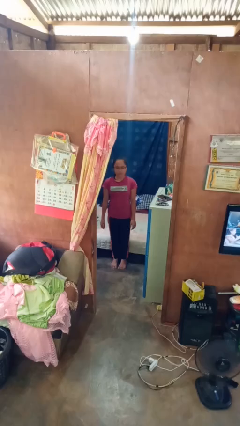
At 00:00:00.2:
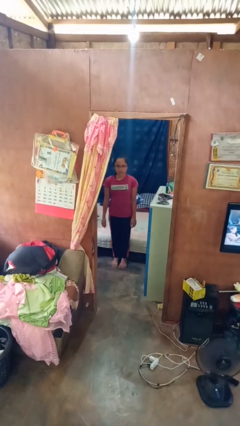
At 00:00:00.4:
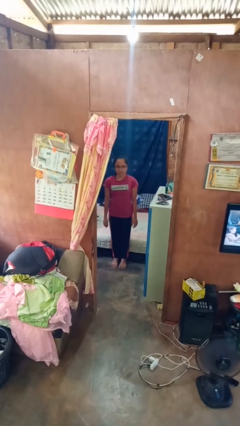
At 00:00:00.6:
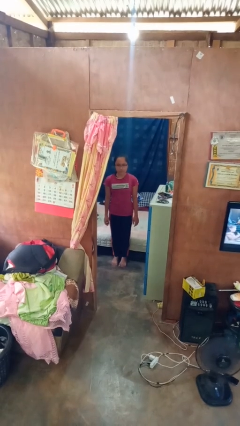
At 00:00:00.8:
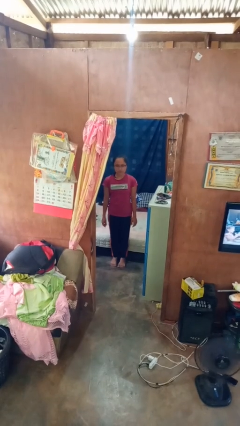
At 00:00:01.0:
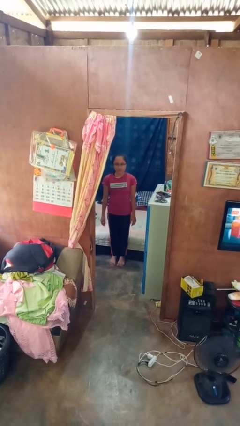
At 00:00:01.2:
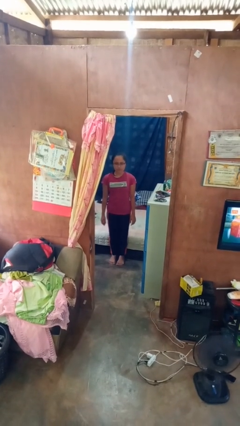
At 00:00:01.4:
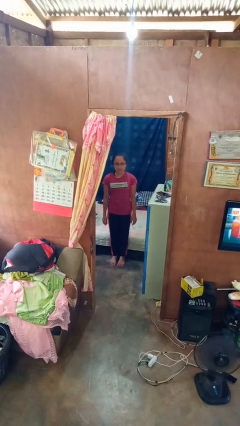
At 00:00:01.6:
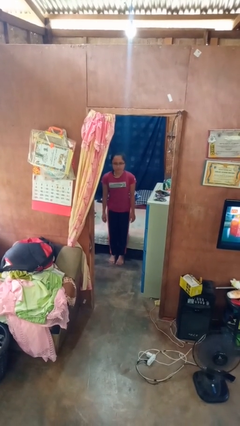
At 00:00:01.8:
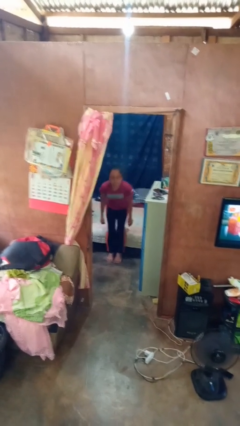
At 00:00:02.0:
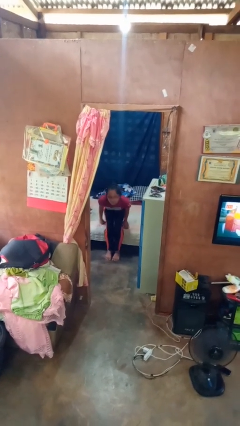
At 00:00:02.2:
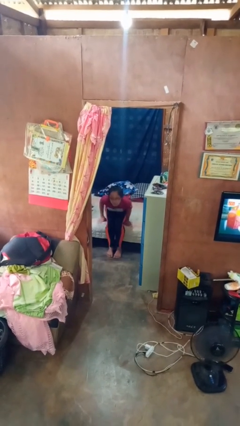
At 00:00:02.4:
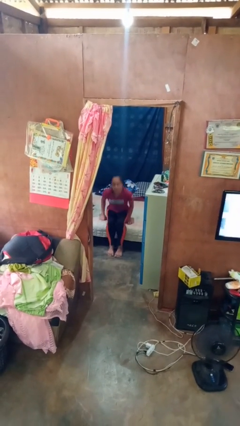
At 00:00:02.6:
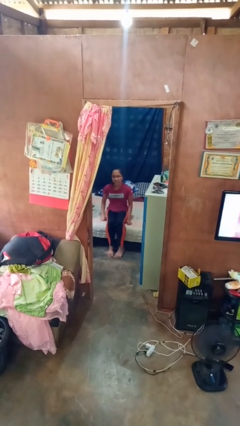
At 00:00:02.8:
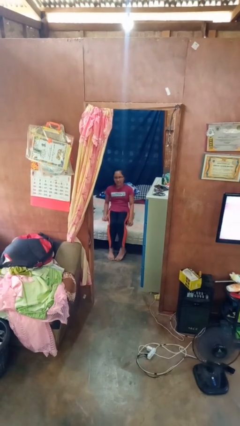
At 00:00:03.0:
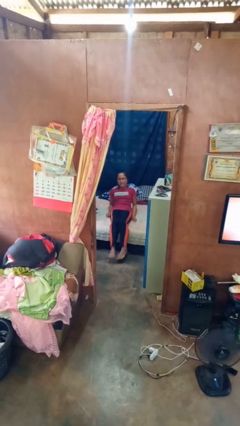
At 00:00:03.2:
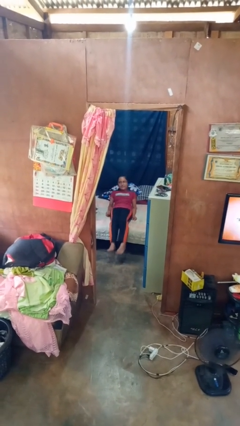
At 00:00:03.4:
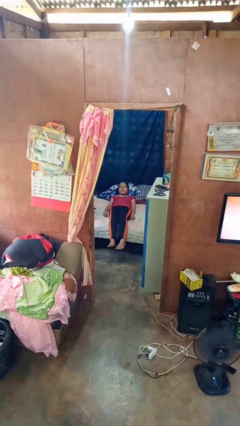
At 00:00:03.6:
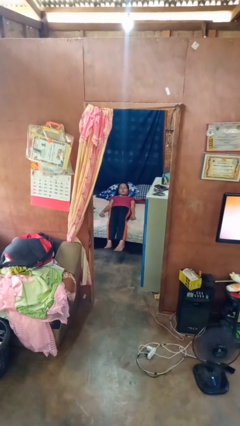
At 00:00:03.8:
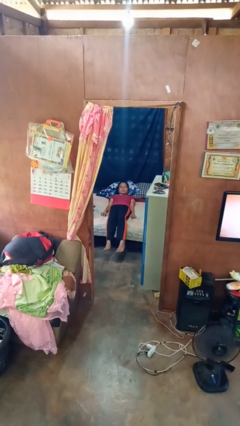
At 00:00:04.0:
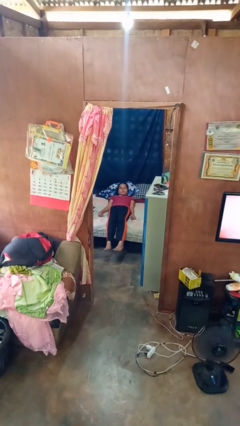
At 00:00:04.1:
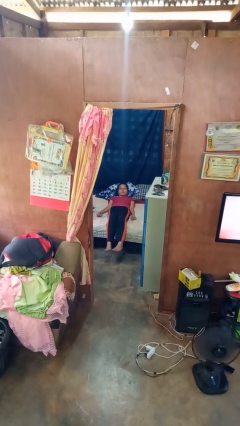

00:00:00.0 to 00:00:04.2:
person lies down on bed

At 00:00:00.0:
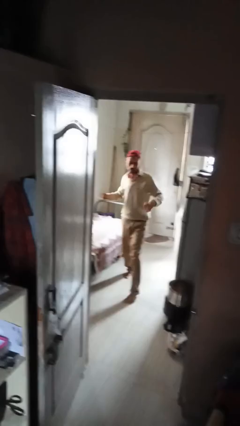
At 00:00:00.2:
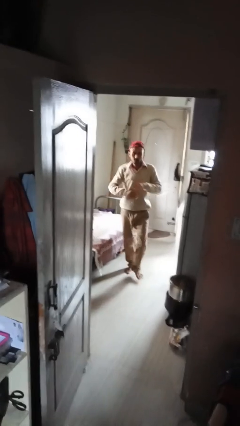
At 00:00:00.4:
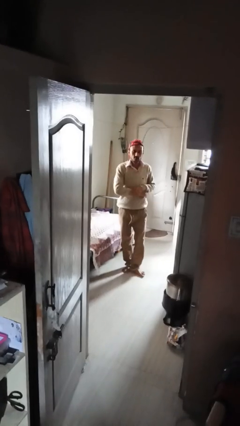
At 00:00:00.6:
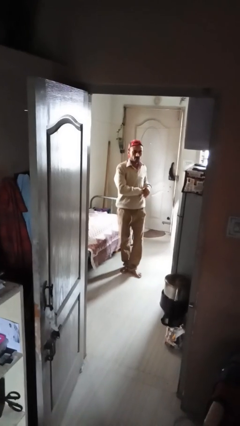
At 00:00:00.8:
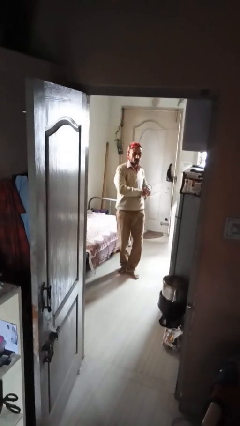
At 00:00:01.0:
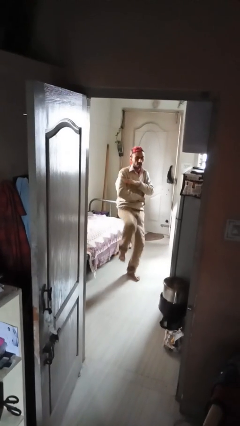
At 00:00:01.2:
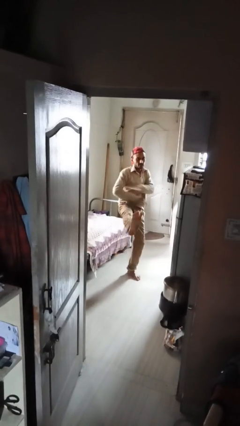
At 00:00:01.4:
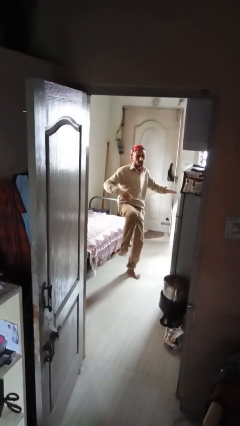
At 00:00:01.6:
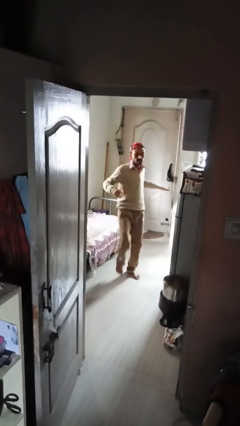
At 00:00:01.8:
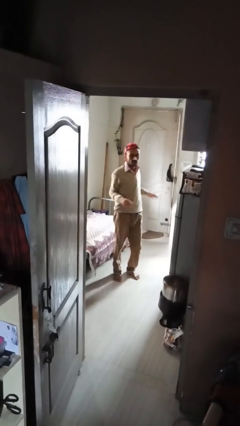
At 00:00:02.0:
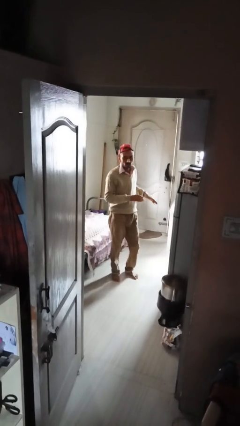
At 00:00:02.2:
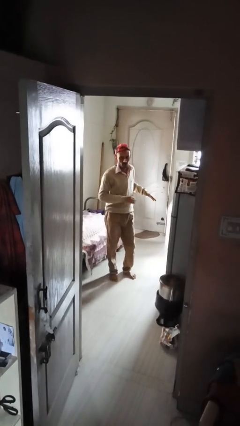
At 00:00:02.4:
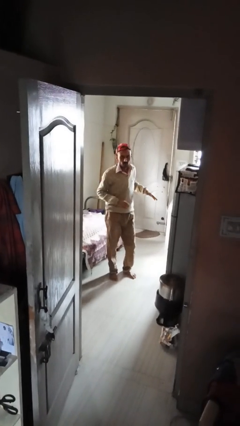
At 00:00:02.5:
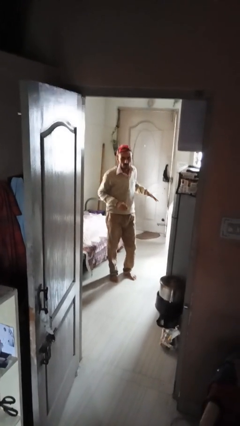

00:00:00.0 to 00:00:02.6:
person karate kicks

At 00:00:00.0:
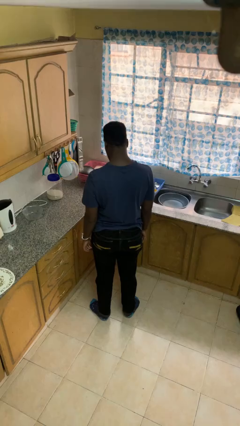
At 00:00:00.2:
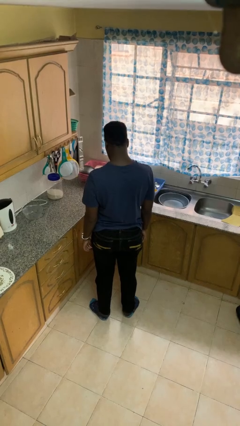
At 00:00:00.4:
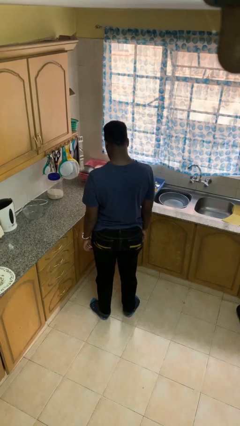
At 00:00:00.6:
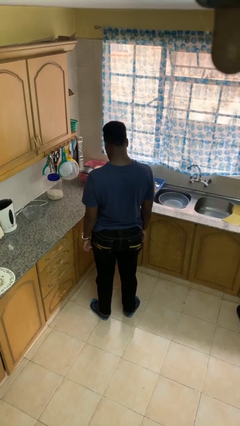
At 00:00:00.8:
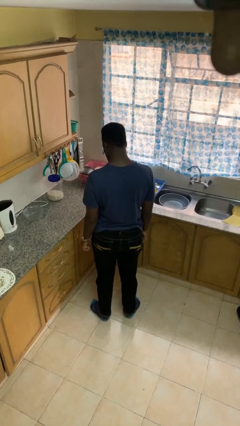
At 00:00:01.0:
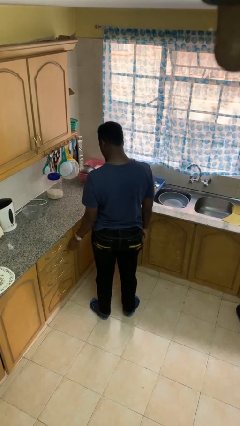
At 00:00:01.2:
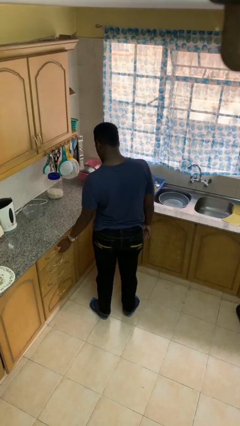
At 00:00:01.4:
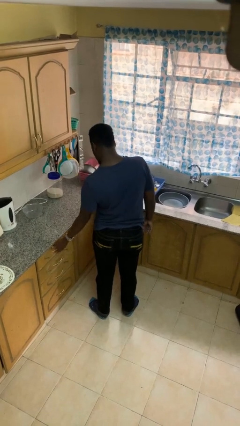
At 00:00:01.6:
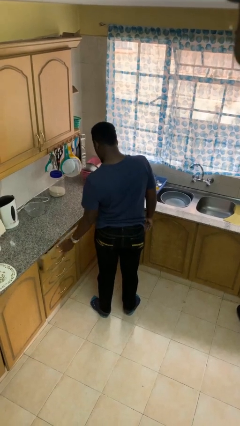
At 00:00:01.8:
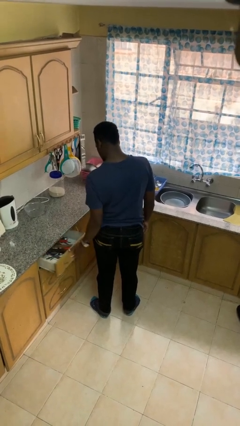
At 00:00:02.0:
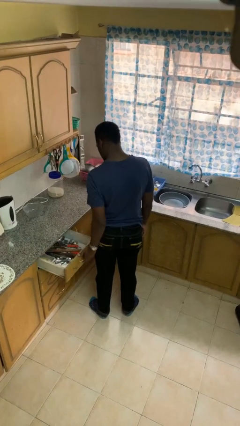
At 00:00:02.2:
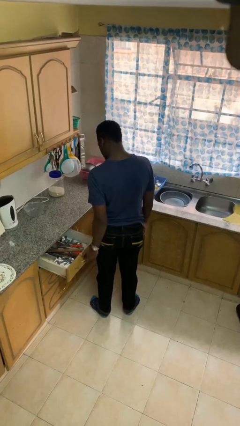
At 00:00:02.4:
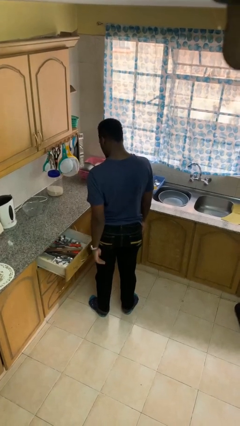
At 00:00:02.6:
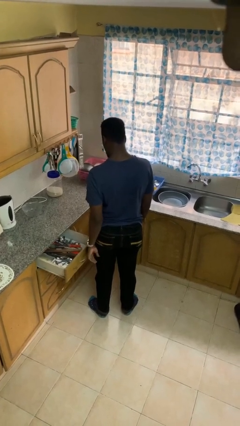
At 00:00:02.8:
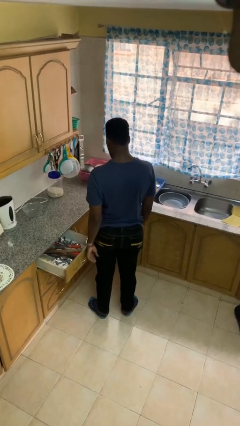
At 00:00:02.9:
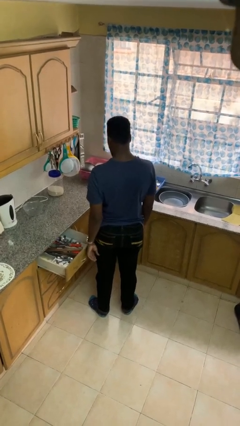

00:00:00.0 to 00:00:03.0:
person opens kitchen drawer

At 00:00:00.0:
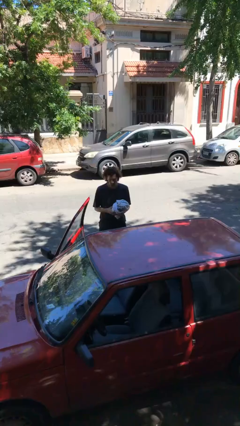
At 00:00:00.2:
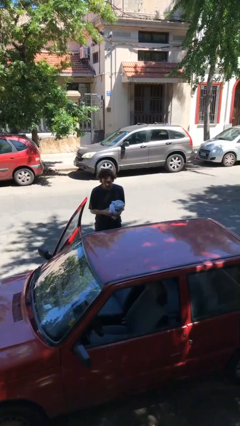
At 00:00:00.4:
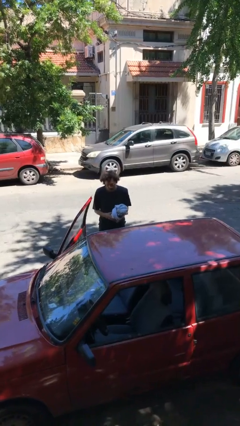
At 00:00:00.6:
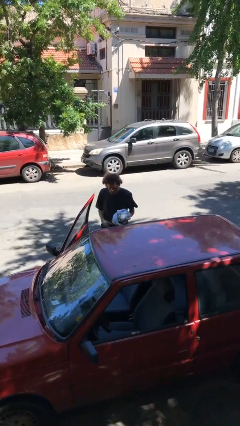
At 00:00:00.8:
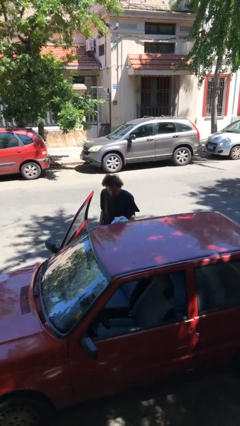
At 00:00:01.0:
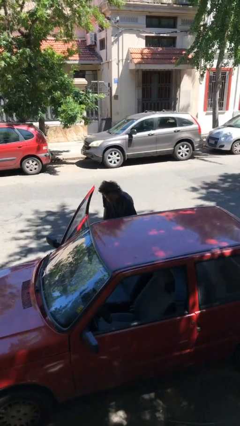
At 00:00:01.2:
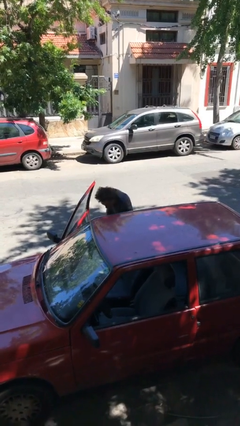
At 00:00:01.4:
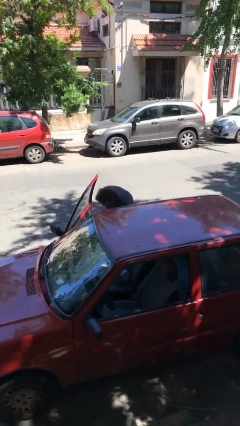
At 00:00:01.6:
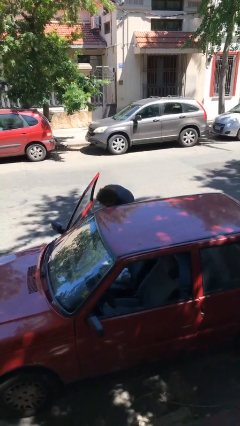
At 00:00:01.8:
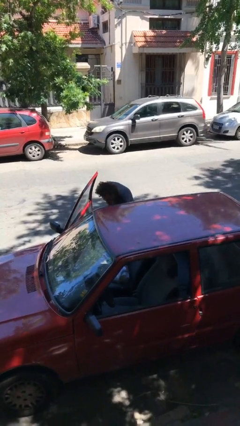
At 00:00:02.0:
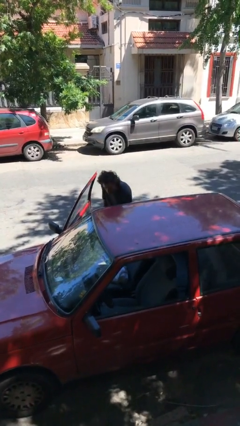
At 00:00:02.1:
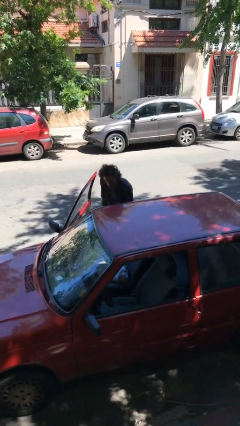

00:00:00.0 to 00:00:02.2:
person loads car

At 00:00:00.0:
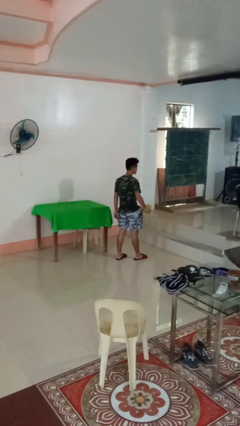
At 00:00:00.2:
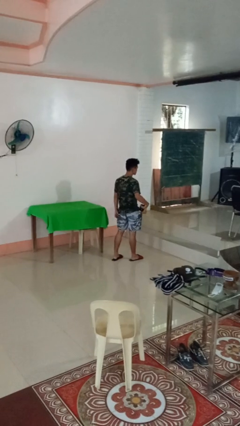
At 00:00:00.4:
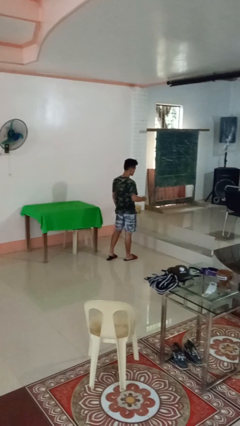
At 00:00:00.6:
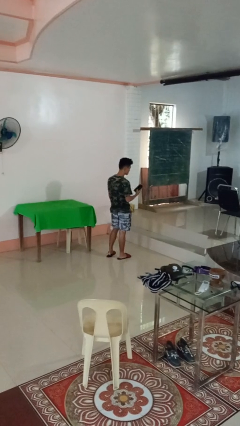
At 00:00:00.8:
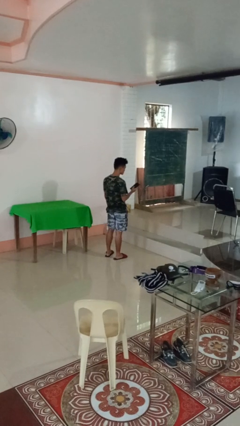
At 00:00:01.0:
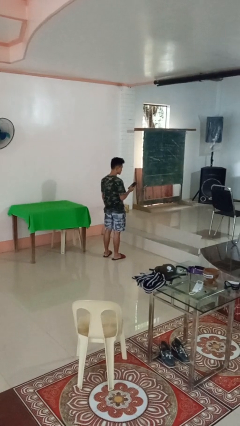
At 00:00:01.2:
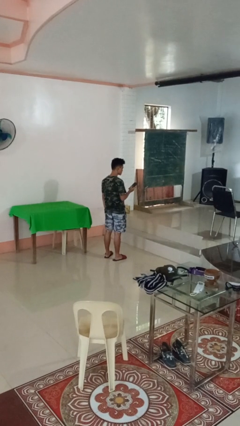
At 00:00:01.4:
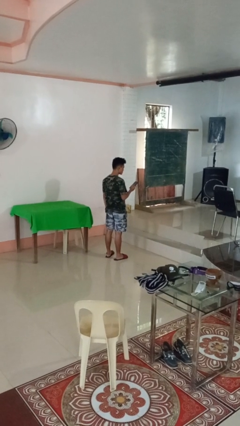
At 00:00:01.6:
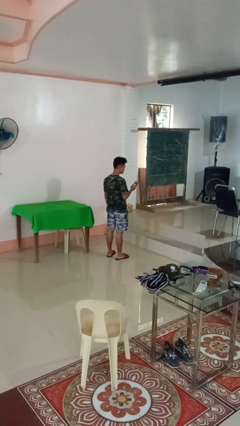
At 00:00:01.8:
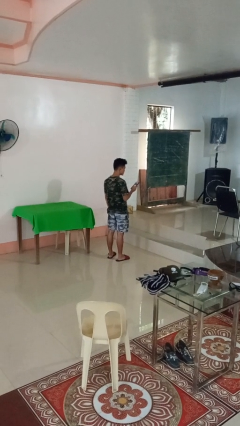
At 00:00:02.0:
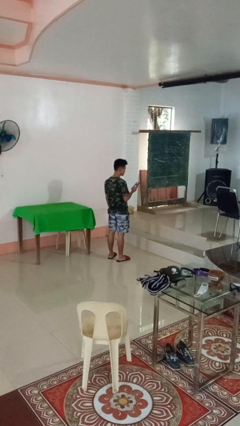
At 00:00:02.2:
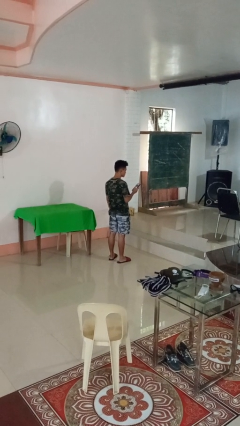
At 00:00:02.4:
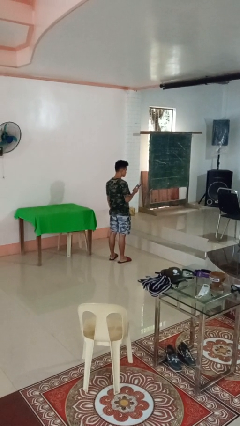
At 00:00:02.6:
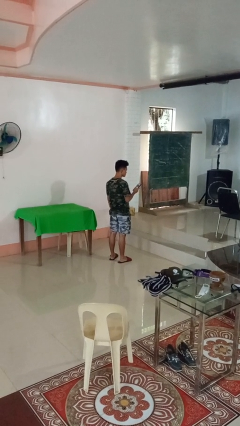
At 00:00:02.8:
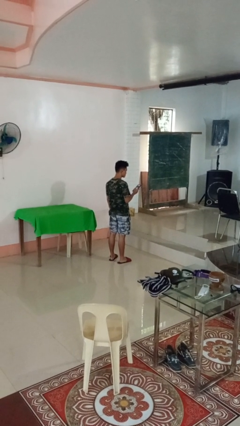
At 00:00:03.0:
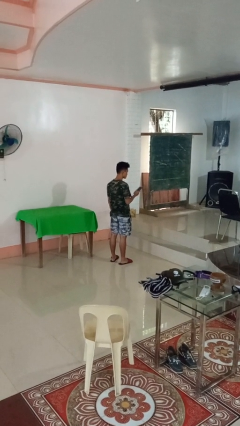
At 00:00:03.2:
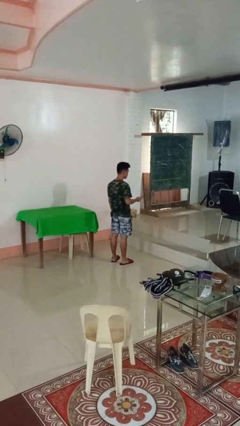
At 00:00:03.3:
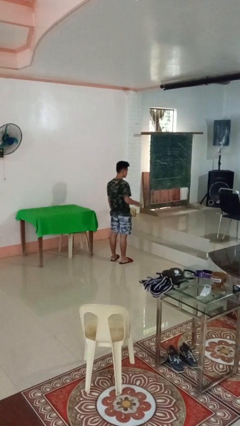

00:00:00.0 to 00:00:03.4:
person takes phone from pocket

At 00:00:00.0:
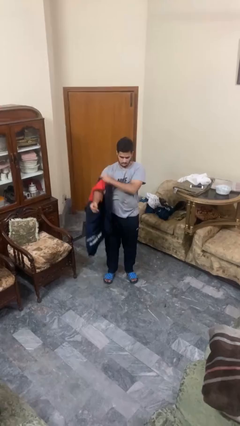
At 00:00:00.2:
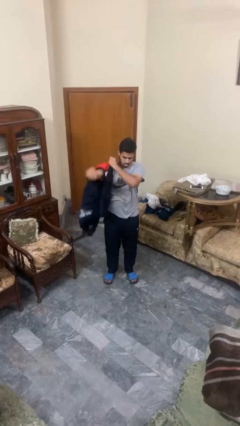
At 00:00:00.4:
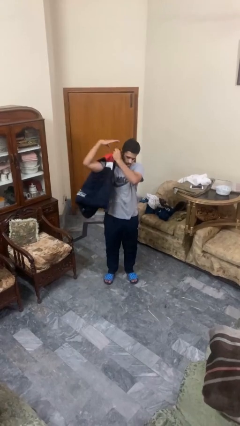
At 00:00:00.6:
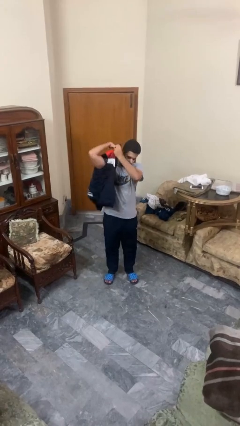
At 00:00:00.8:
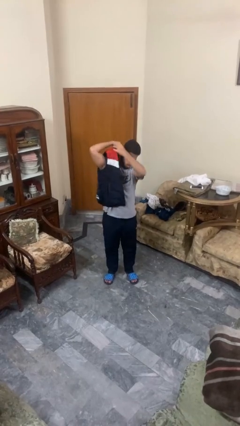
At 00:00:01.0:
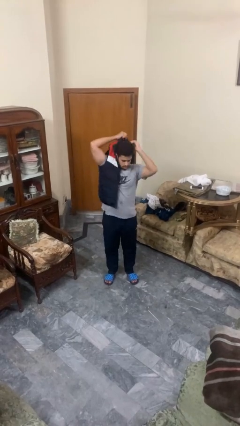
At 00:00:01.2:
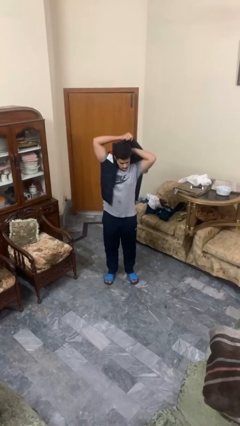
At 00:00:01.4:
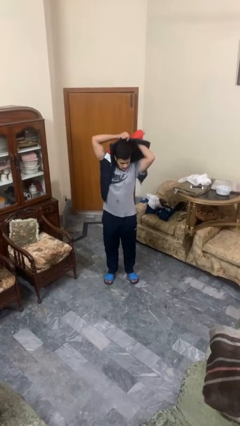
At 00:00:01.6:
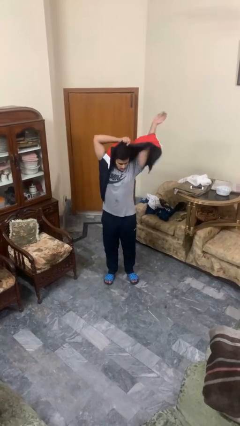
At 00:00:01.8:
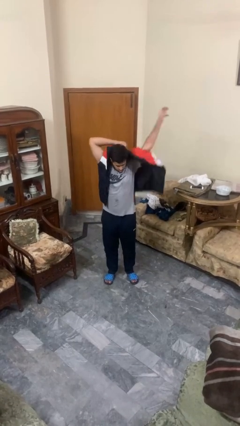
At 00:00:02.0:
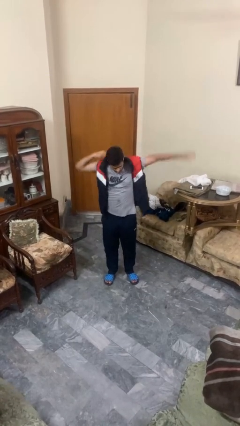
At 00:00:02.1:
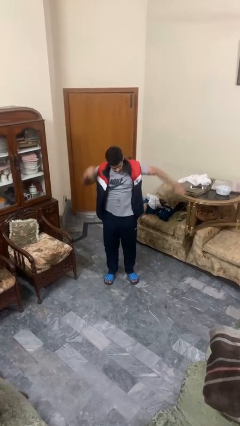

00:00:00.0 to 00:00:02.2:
person puts on jacket
